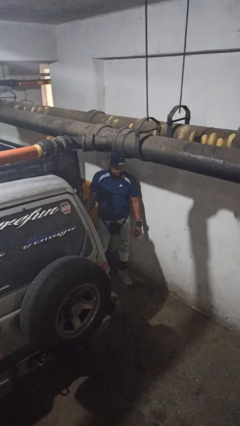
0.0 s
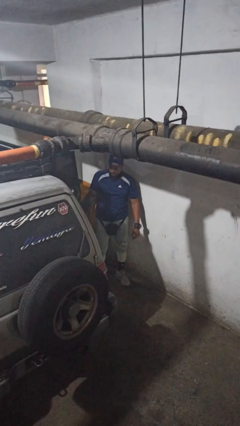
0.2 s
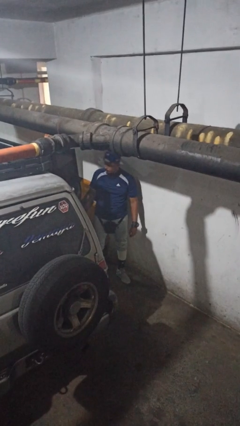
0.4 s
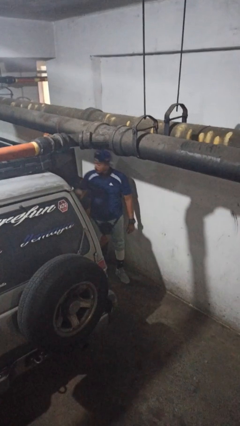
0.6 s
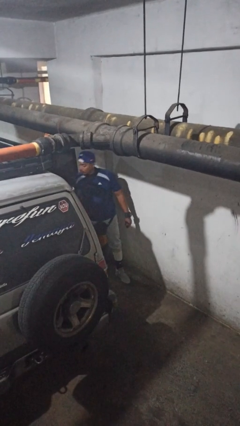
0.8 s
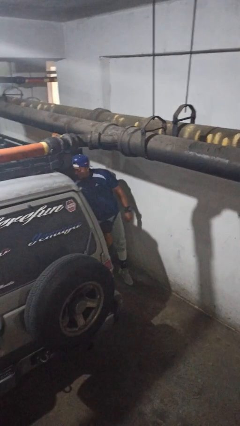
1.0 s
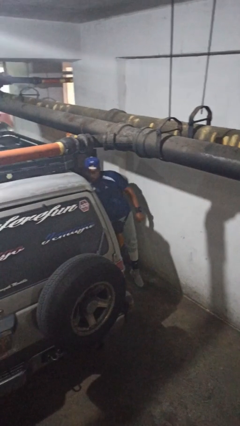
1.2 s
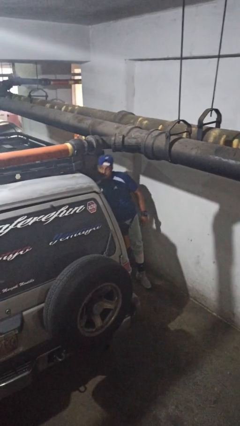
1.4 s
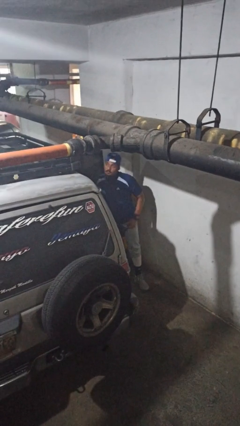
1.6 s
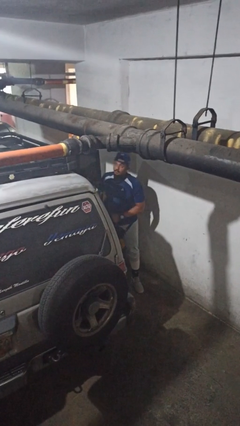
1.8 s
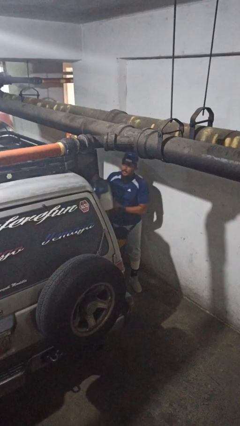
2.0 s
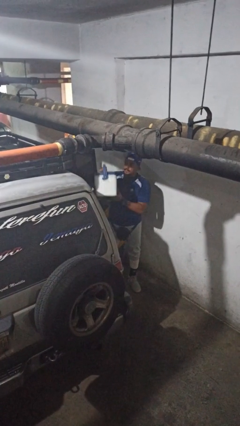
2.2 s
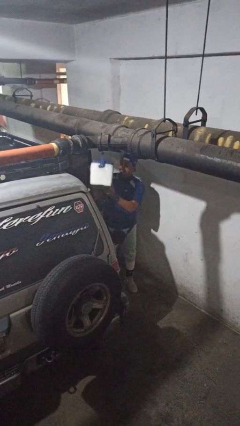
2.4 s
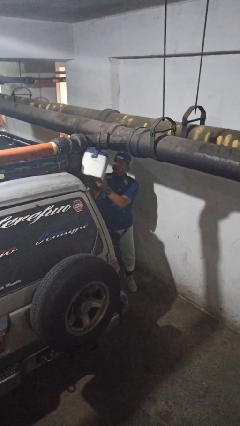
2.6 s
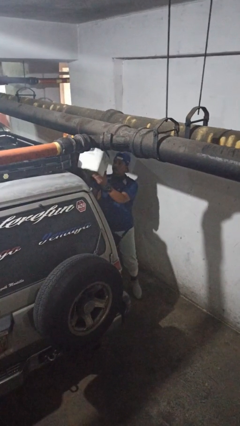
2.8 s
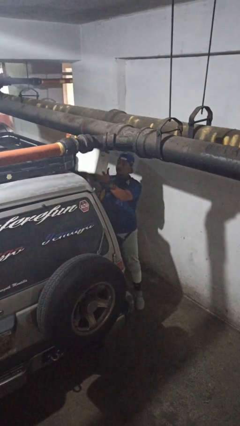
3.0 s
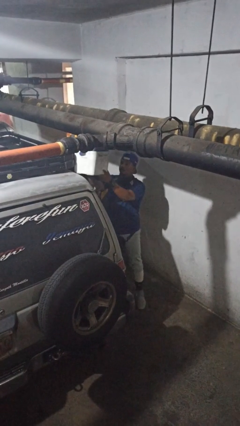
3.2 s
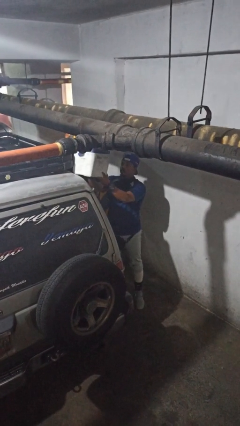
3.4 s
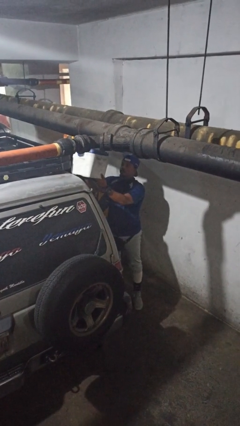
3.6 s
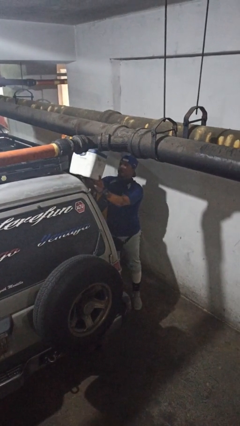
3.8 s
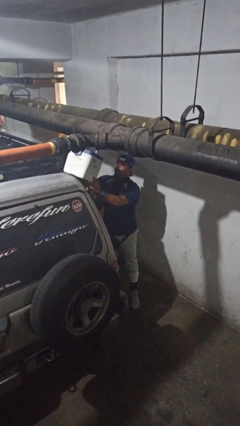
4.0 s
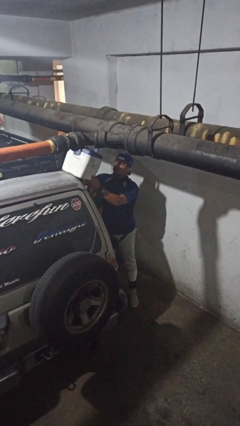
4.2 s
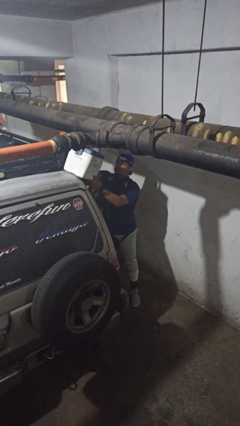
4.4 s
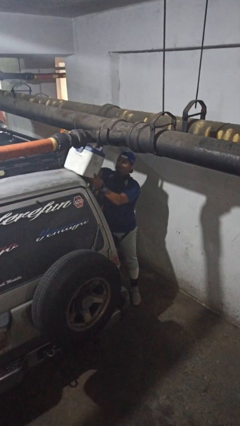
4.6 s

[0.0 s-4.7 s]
person unloads car

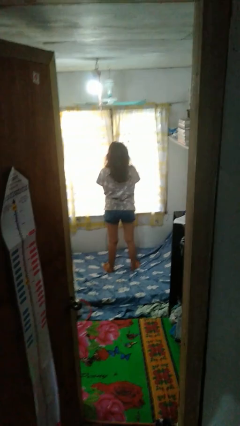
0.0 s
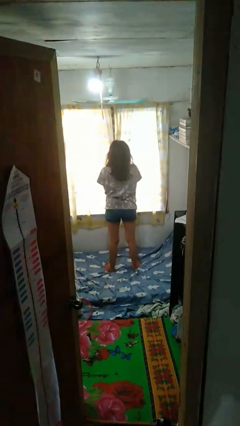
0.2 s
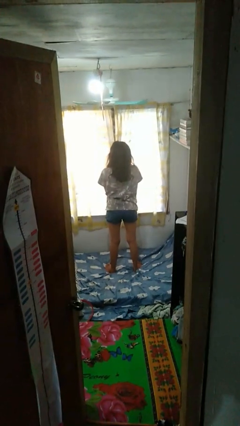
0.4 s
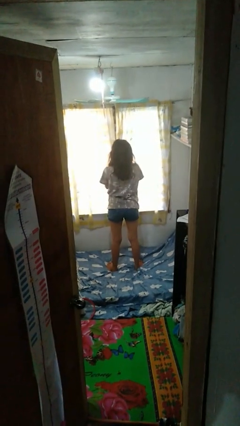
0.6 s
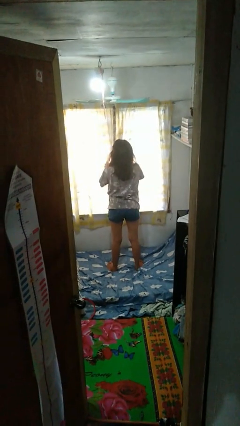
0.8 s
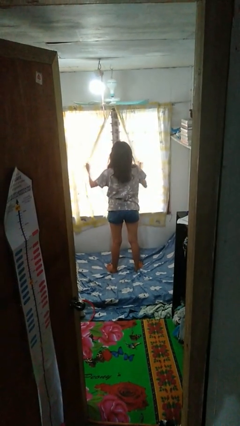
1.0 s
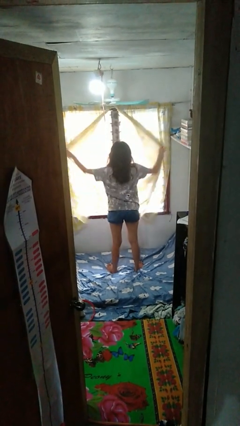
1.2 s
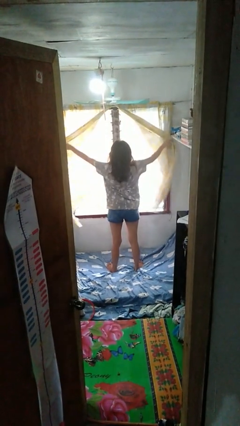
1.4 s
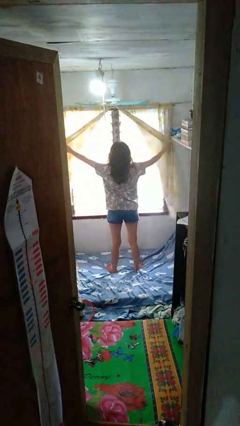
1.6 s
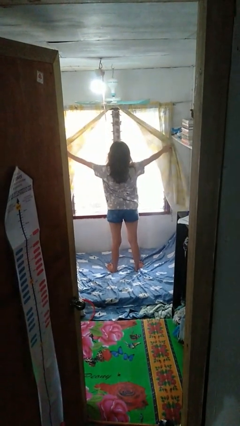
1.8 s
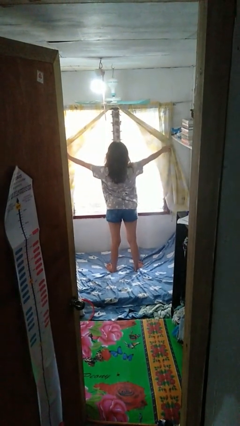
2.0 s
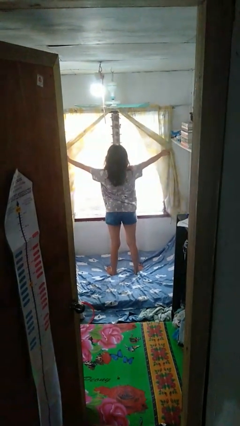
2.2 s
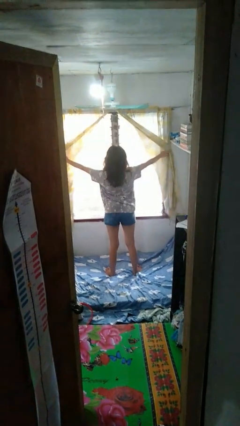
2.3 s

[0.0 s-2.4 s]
person opens curtains

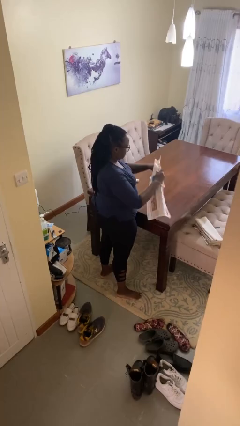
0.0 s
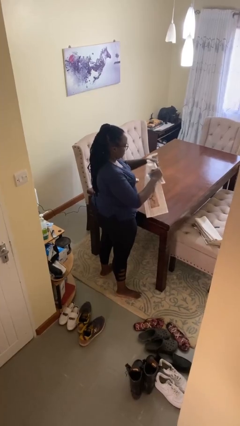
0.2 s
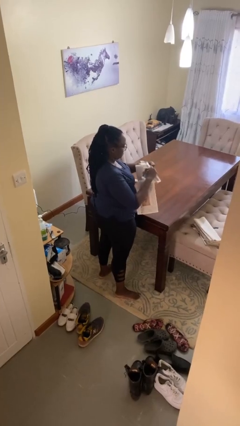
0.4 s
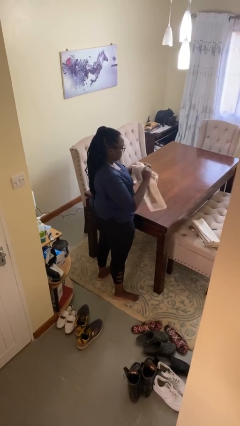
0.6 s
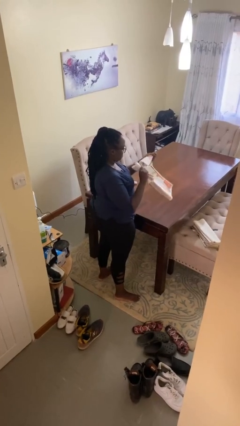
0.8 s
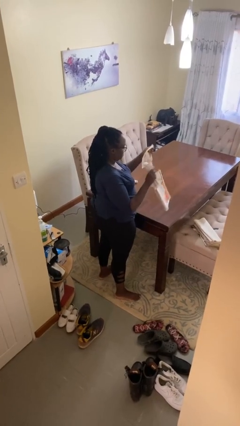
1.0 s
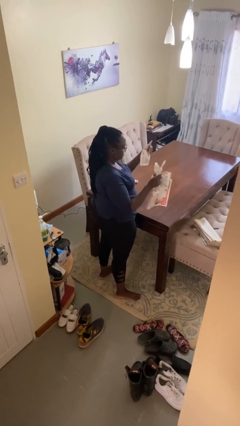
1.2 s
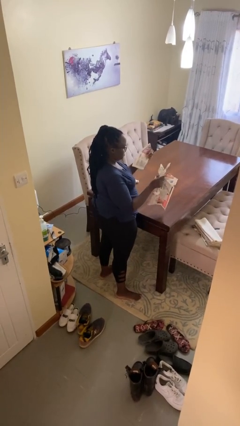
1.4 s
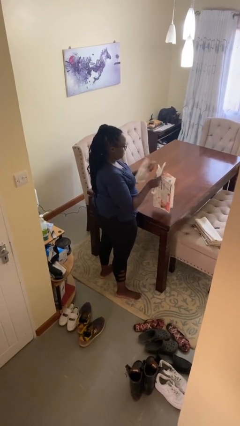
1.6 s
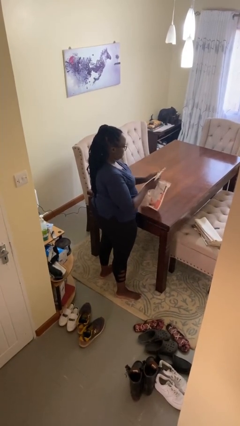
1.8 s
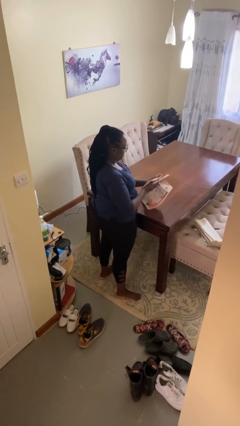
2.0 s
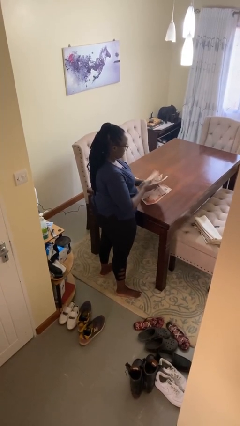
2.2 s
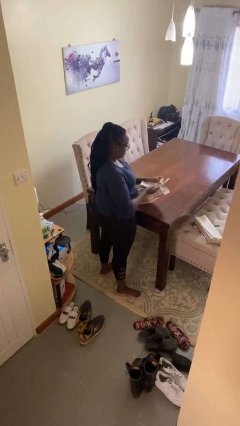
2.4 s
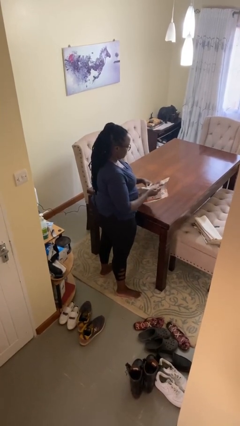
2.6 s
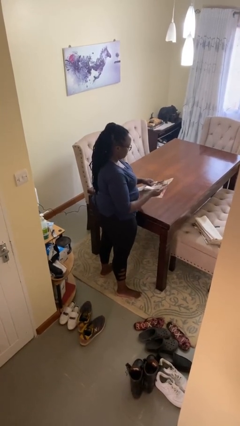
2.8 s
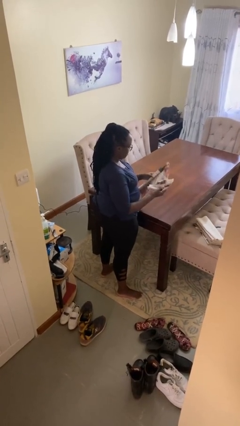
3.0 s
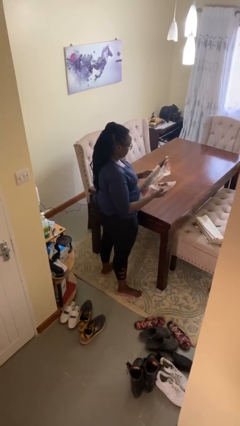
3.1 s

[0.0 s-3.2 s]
person tears paper

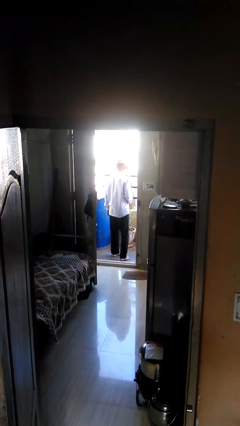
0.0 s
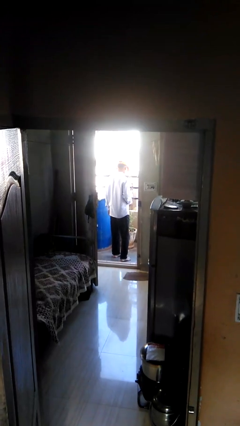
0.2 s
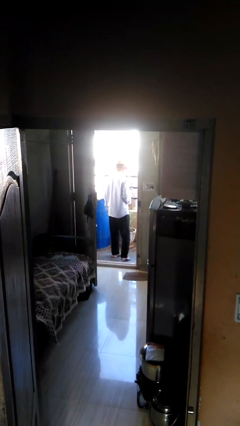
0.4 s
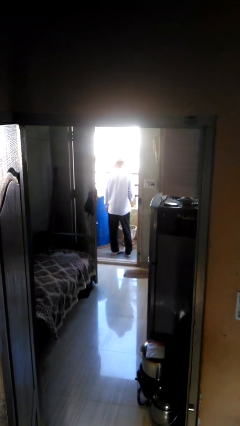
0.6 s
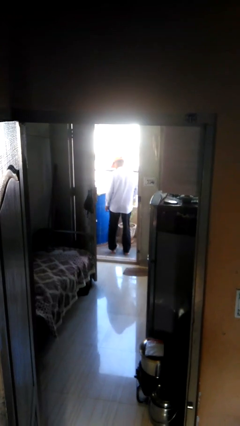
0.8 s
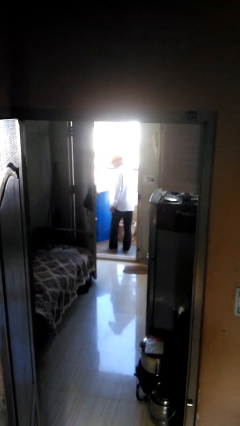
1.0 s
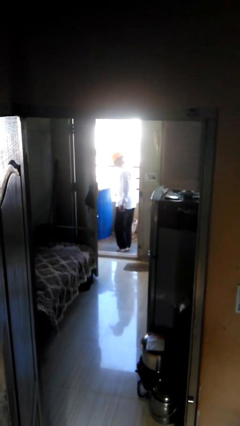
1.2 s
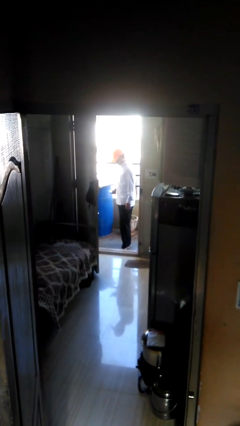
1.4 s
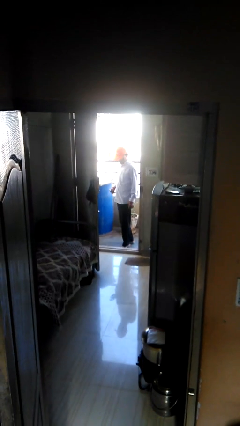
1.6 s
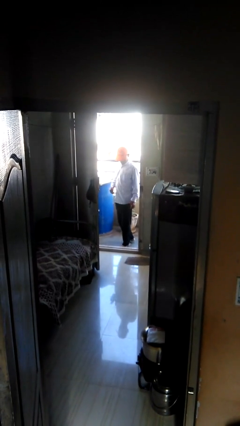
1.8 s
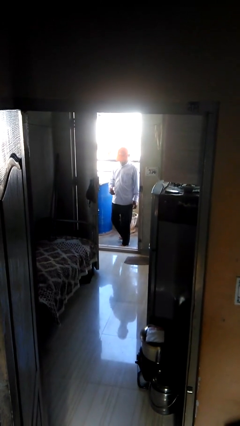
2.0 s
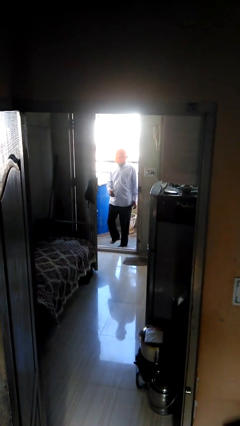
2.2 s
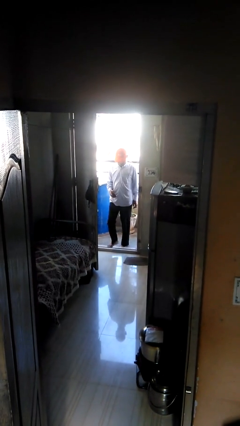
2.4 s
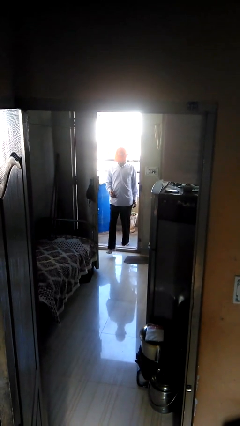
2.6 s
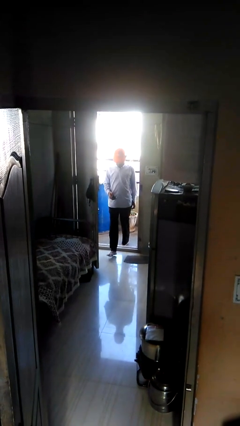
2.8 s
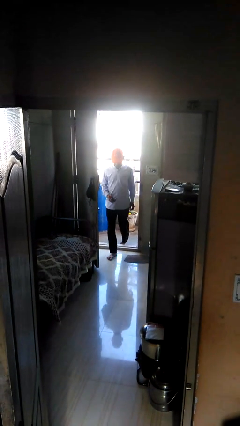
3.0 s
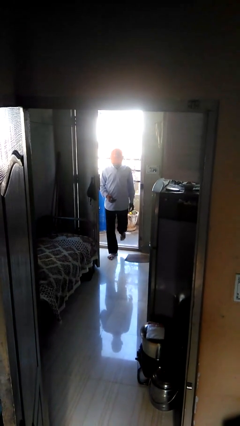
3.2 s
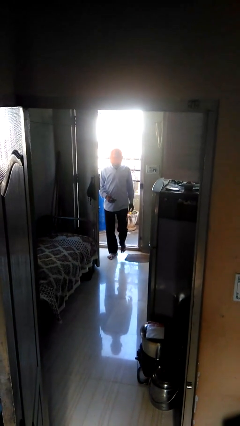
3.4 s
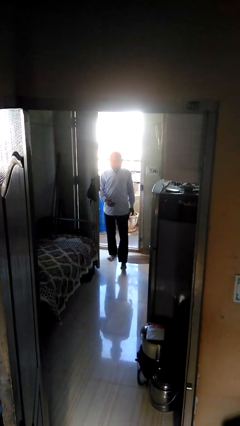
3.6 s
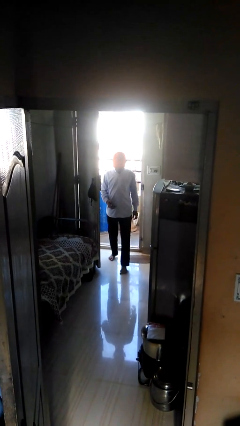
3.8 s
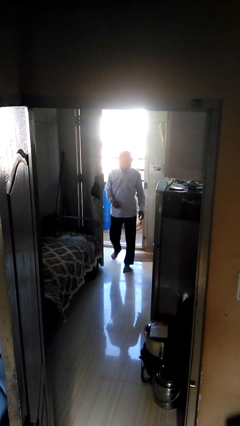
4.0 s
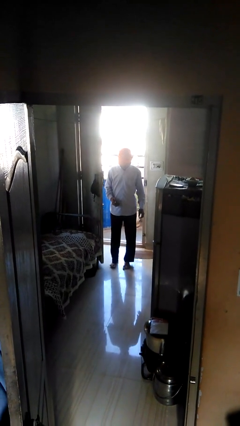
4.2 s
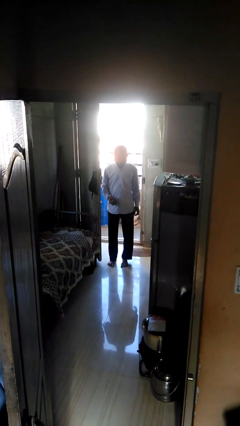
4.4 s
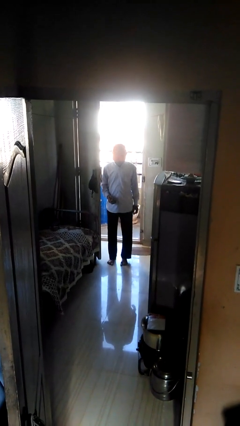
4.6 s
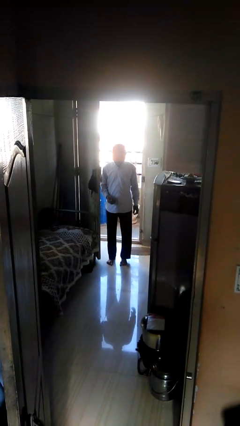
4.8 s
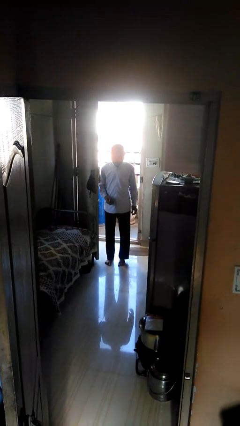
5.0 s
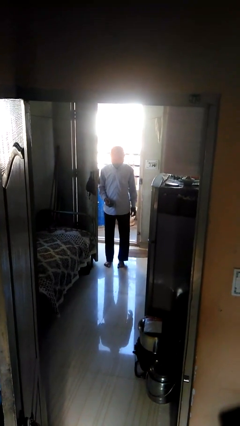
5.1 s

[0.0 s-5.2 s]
person enters scene through structure

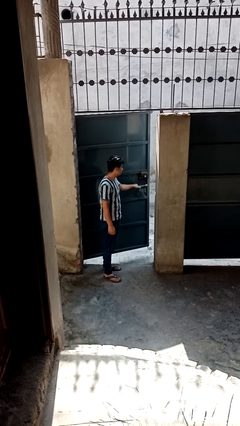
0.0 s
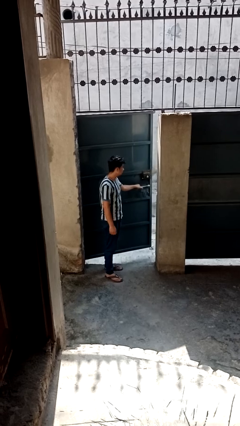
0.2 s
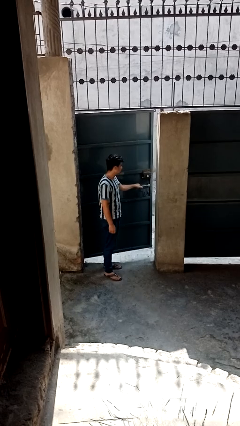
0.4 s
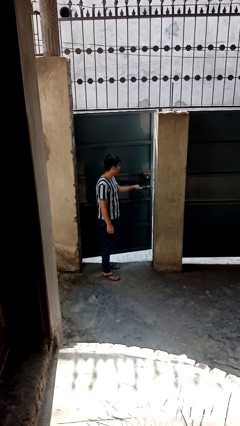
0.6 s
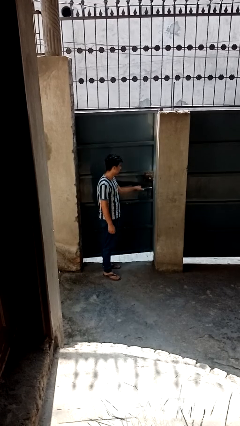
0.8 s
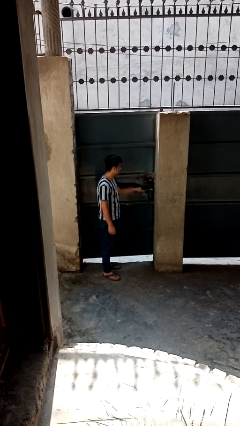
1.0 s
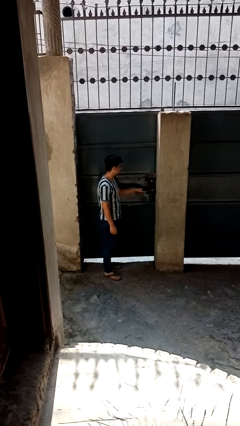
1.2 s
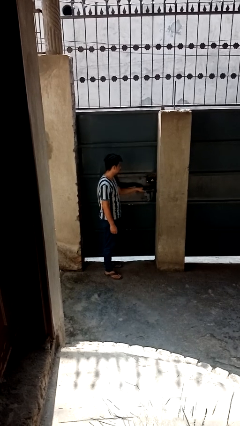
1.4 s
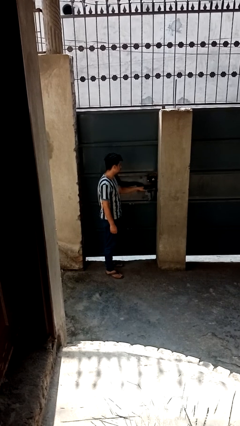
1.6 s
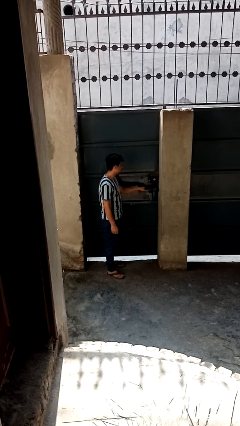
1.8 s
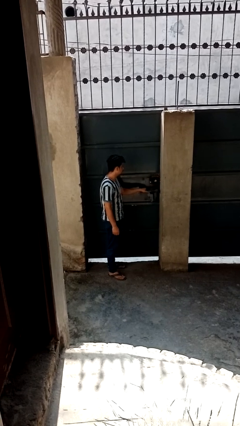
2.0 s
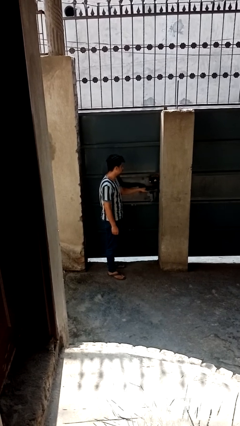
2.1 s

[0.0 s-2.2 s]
person closes gate
